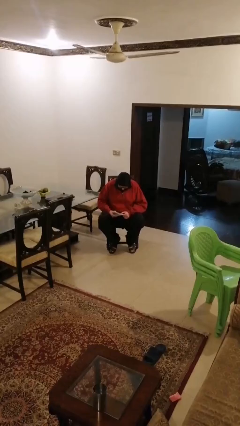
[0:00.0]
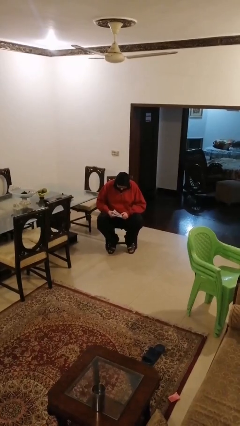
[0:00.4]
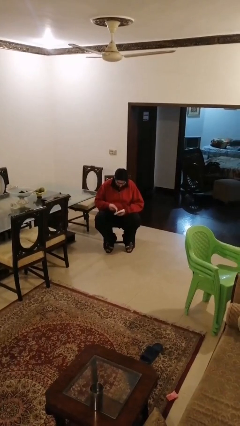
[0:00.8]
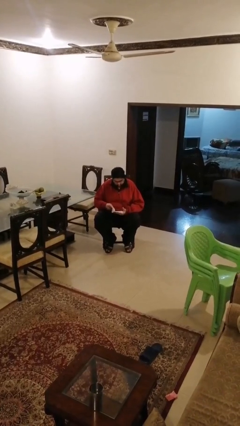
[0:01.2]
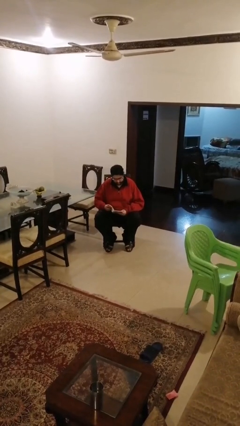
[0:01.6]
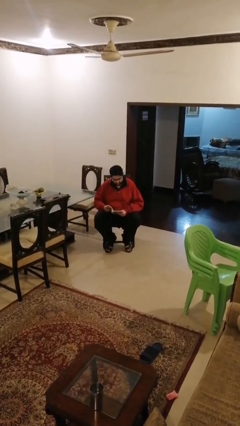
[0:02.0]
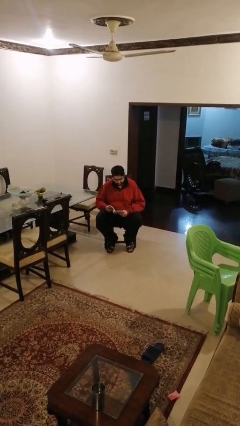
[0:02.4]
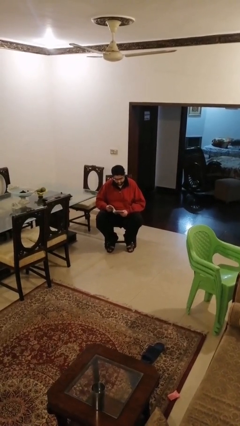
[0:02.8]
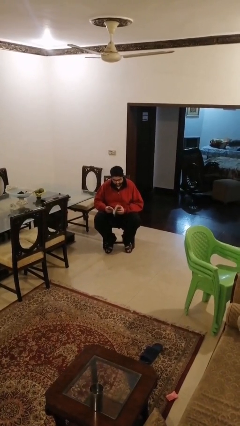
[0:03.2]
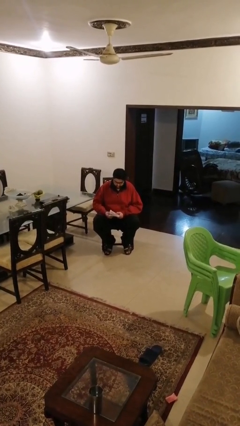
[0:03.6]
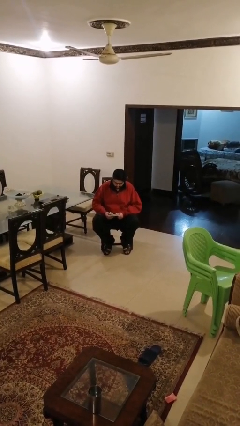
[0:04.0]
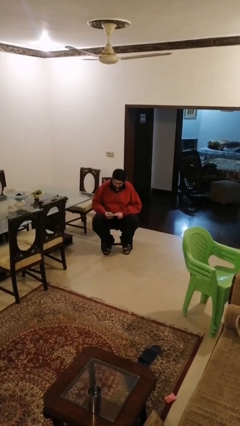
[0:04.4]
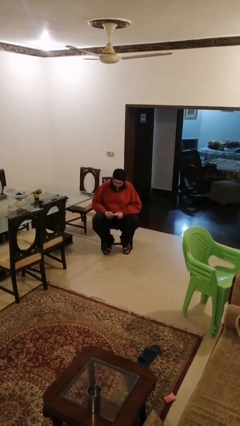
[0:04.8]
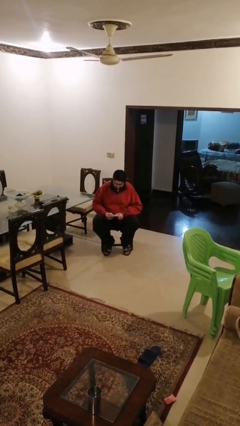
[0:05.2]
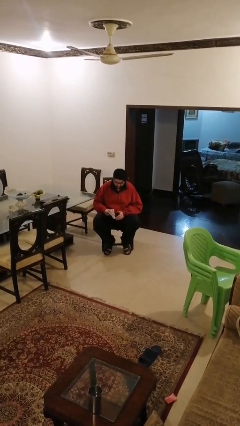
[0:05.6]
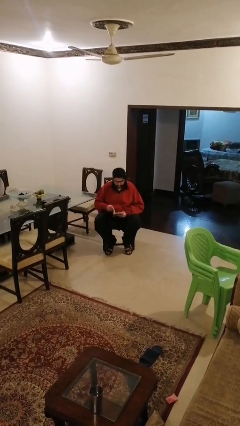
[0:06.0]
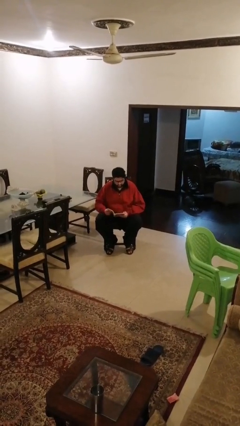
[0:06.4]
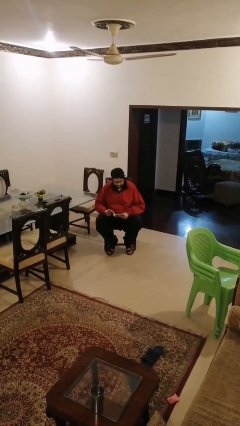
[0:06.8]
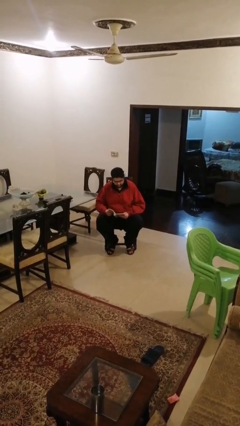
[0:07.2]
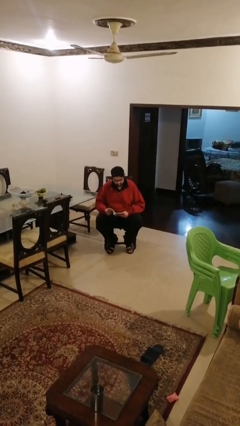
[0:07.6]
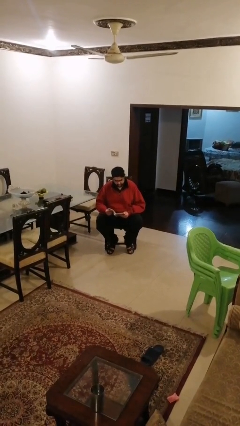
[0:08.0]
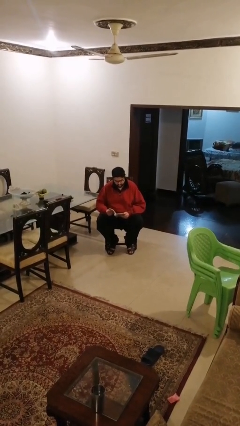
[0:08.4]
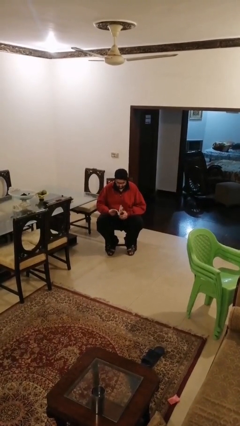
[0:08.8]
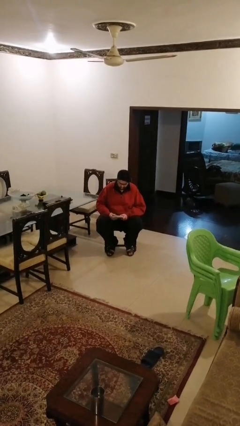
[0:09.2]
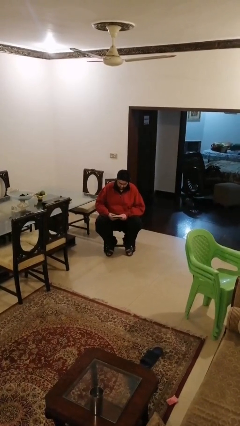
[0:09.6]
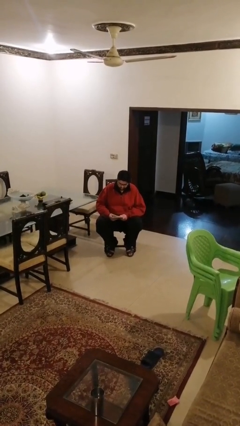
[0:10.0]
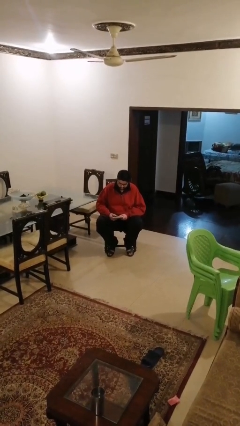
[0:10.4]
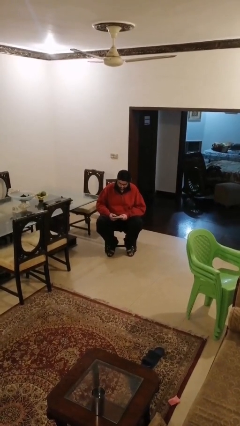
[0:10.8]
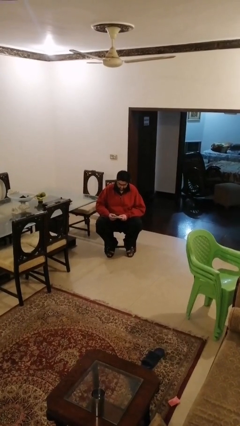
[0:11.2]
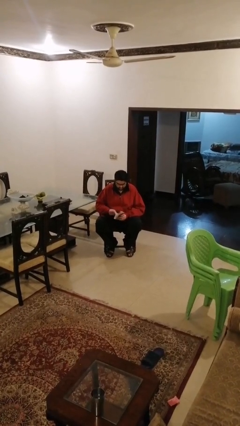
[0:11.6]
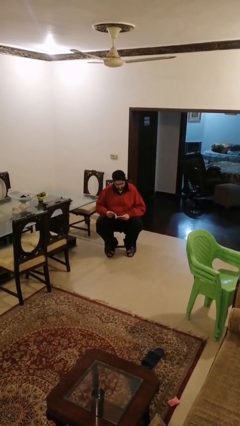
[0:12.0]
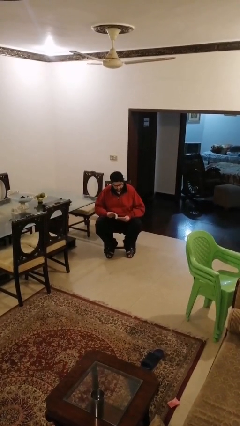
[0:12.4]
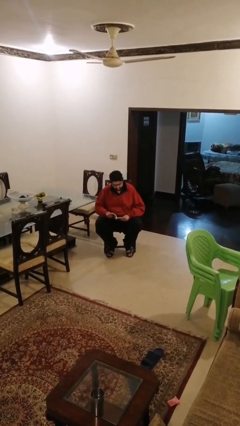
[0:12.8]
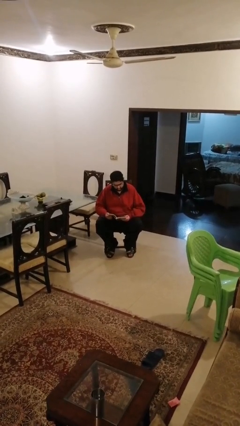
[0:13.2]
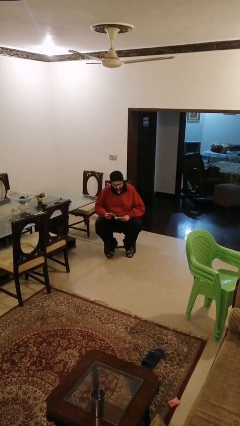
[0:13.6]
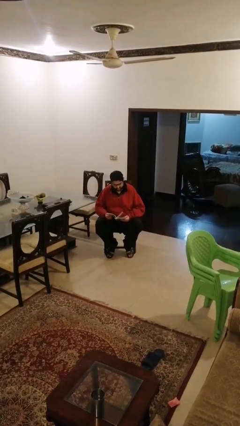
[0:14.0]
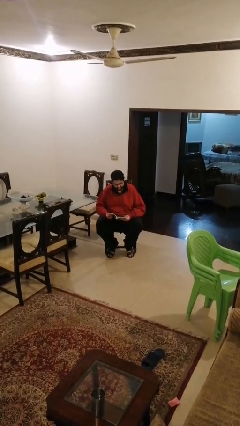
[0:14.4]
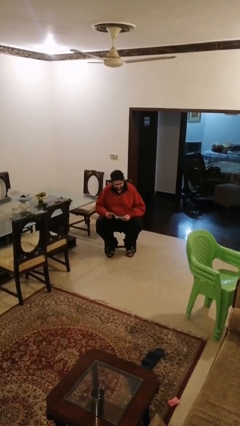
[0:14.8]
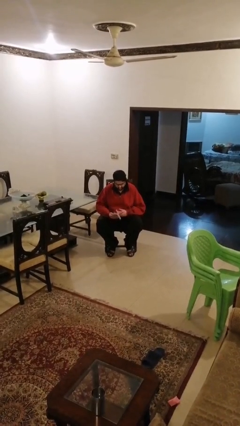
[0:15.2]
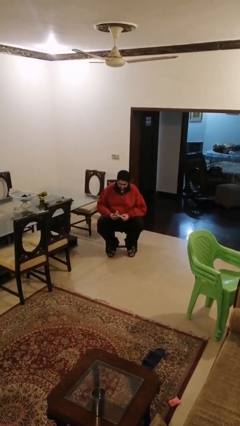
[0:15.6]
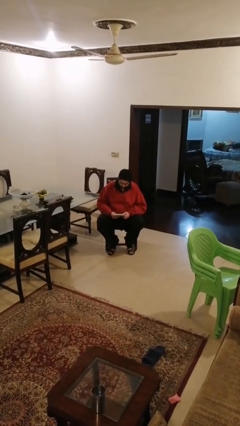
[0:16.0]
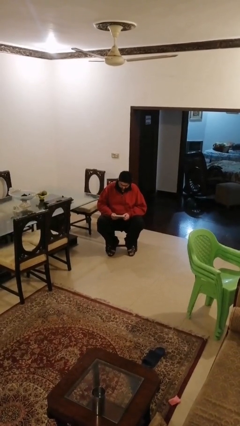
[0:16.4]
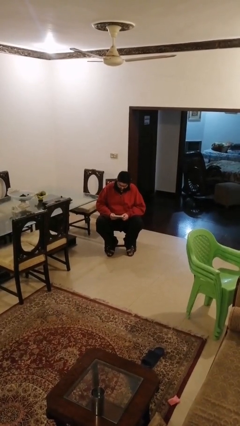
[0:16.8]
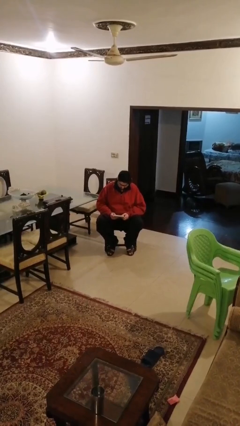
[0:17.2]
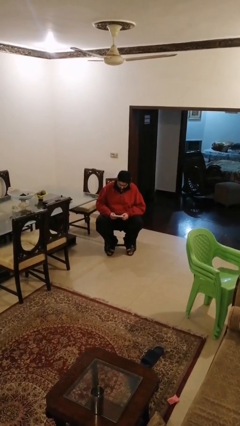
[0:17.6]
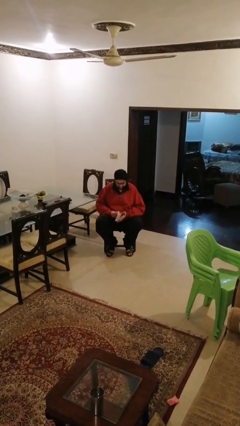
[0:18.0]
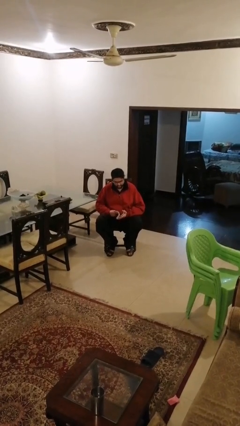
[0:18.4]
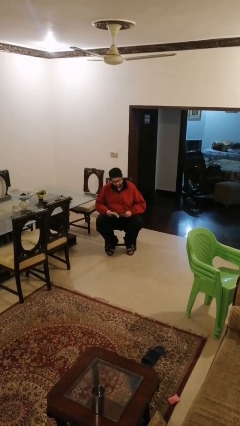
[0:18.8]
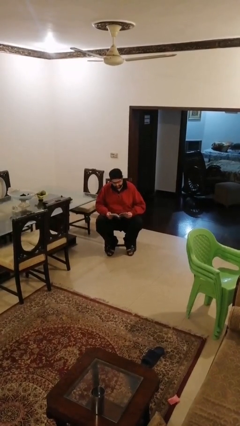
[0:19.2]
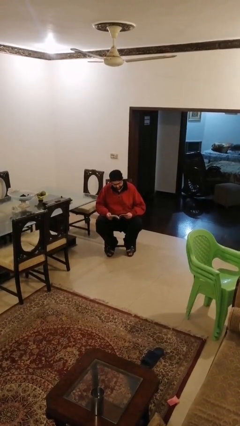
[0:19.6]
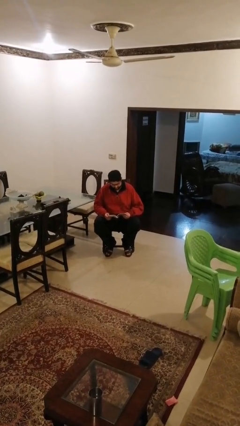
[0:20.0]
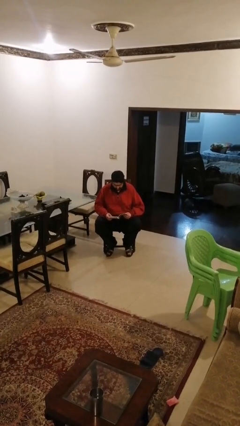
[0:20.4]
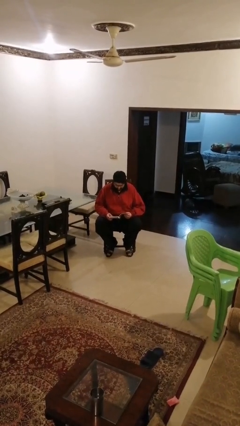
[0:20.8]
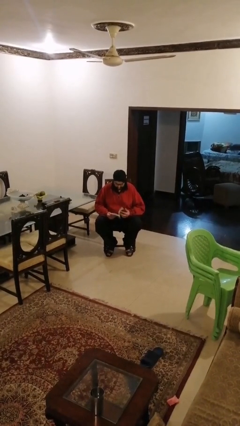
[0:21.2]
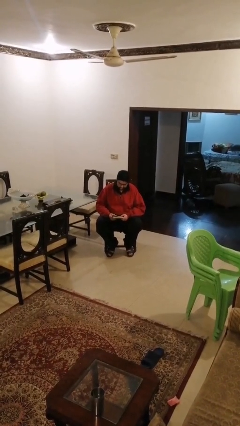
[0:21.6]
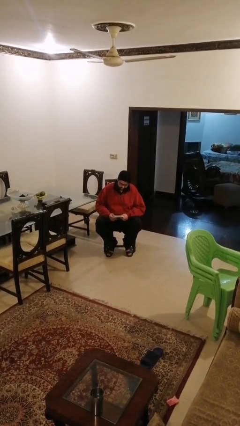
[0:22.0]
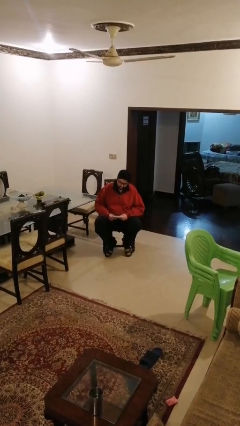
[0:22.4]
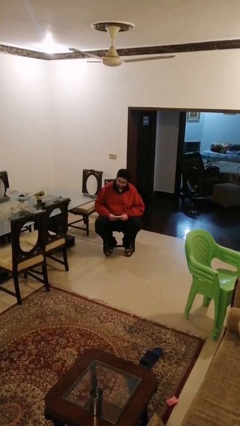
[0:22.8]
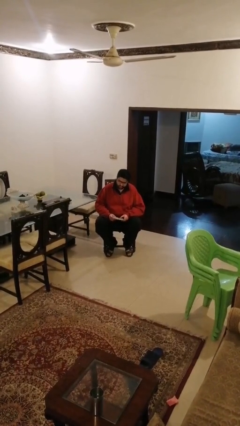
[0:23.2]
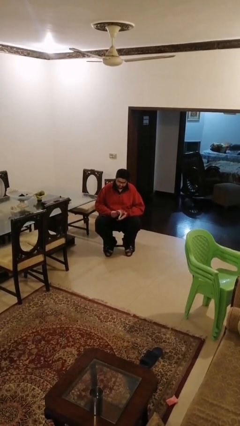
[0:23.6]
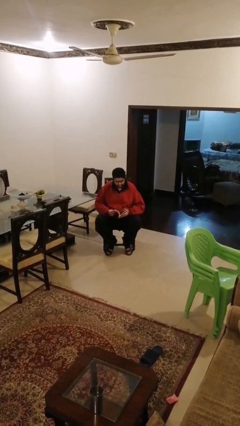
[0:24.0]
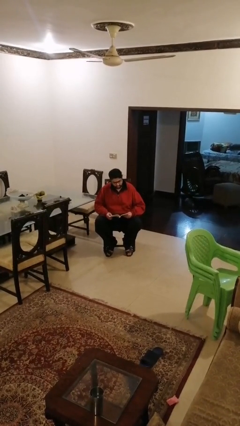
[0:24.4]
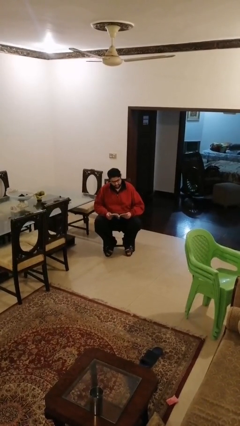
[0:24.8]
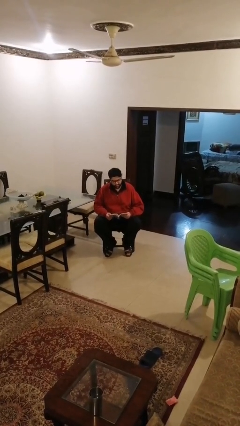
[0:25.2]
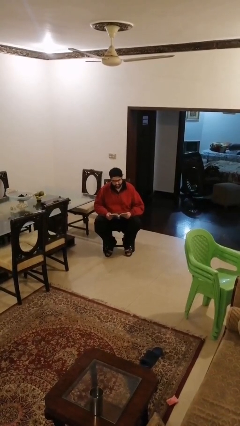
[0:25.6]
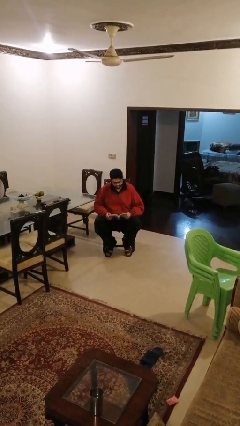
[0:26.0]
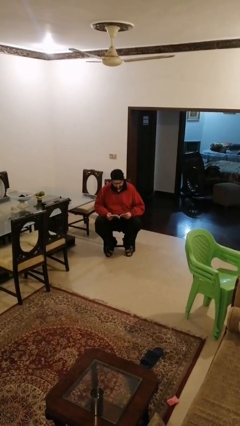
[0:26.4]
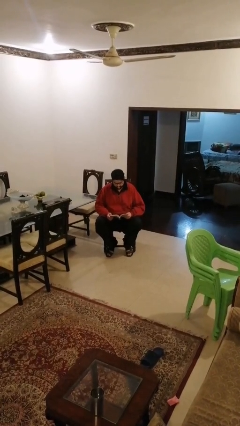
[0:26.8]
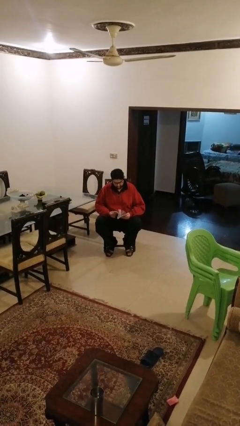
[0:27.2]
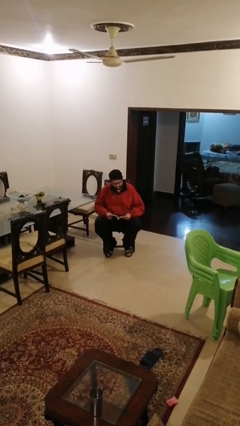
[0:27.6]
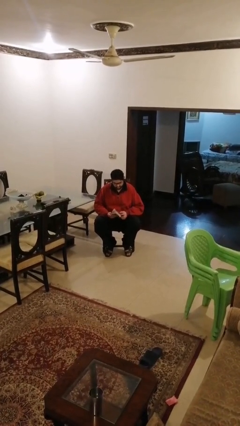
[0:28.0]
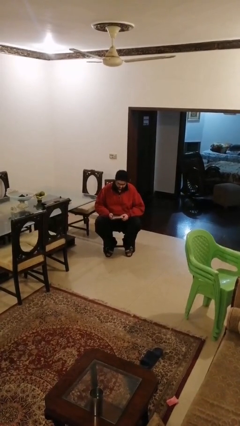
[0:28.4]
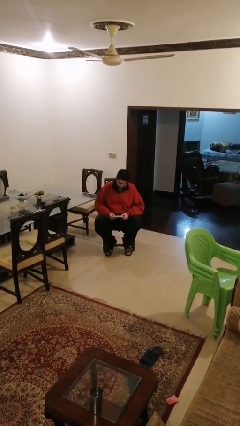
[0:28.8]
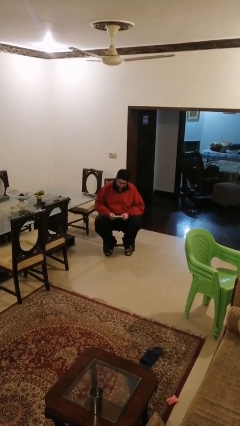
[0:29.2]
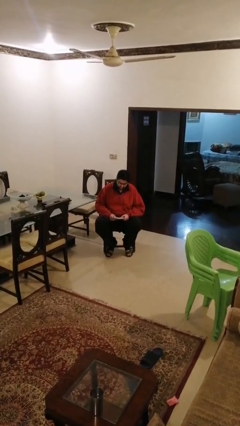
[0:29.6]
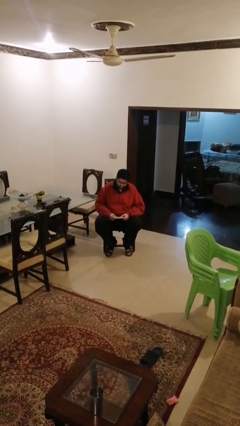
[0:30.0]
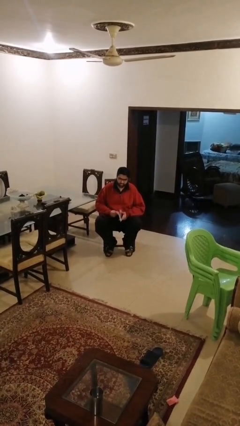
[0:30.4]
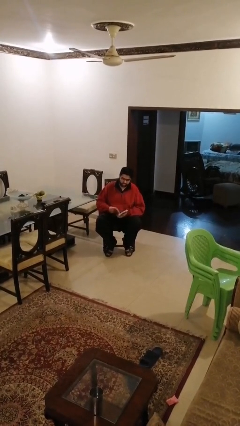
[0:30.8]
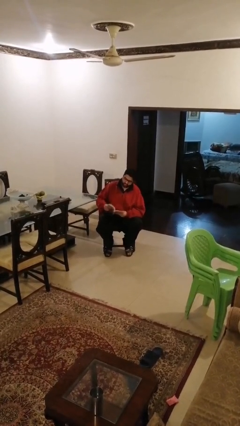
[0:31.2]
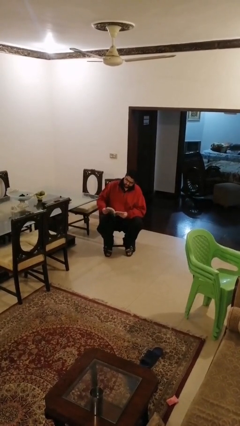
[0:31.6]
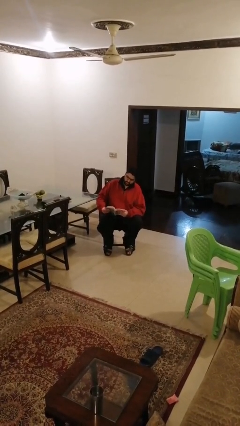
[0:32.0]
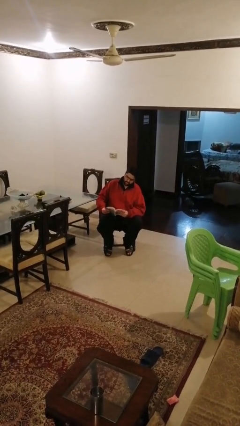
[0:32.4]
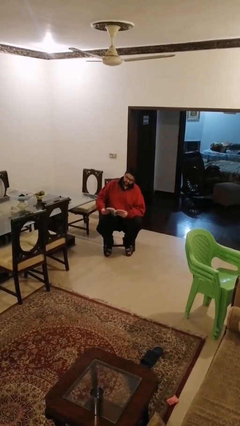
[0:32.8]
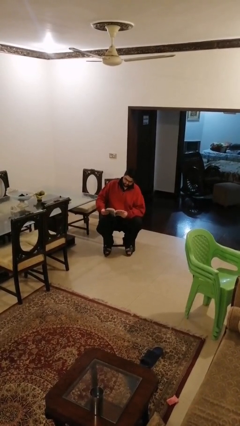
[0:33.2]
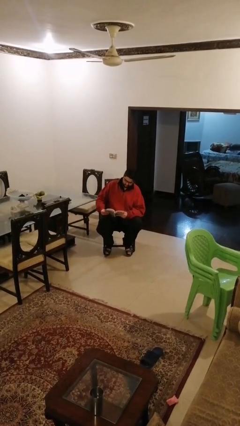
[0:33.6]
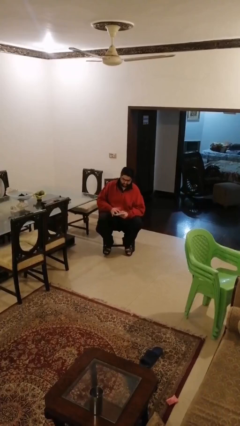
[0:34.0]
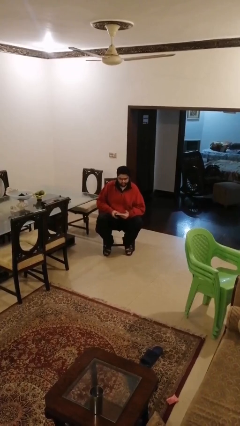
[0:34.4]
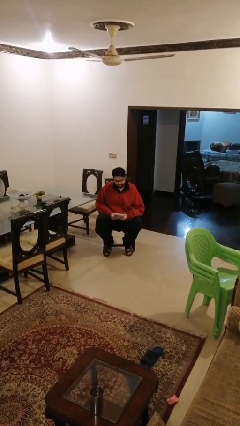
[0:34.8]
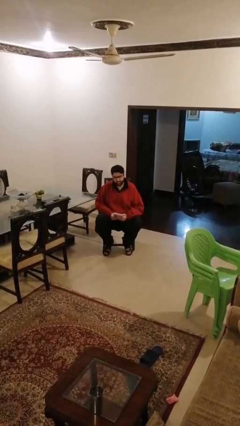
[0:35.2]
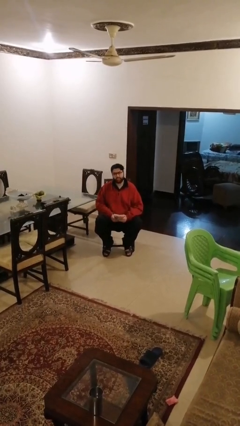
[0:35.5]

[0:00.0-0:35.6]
person reads document

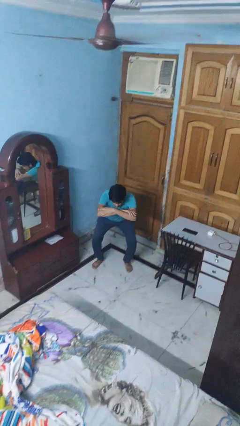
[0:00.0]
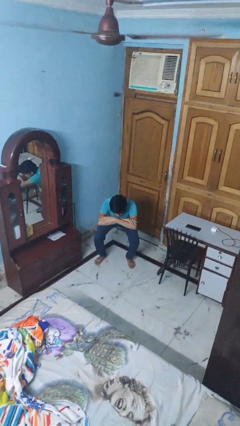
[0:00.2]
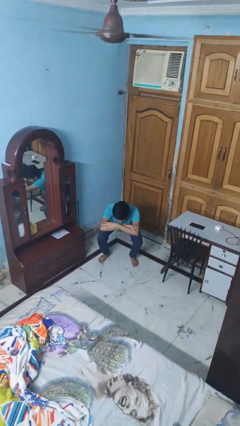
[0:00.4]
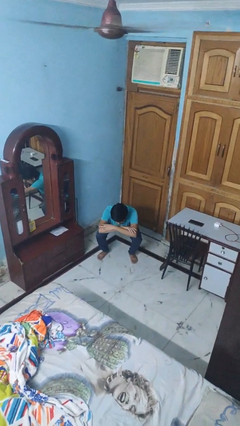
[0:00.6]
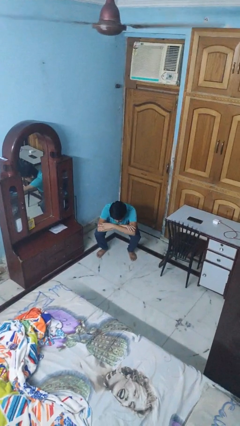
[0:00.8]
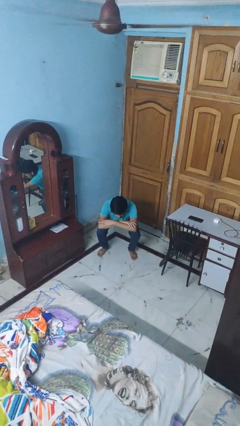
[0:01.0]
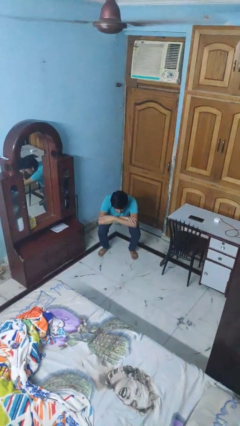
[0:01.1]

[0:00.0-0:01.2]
person squats
